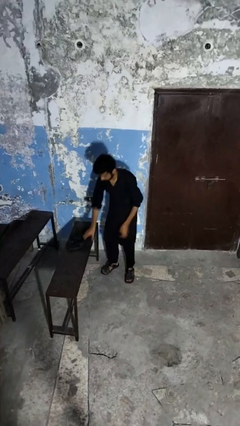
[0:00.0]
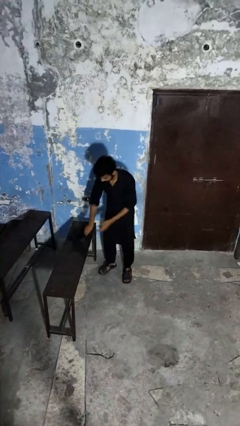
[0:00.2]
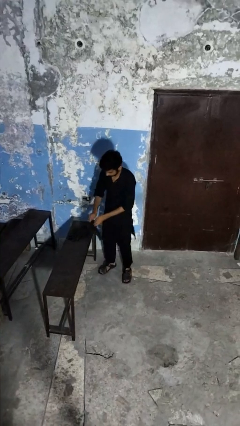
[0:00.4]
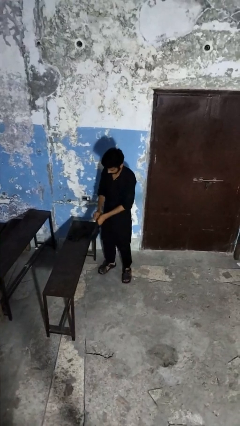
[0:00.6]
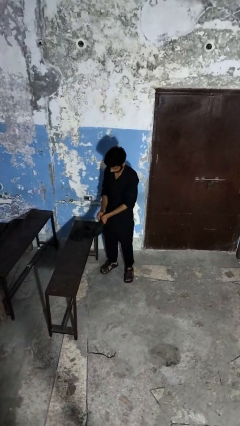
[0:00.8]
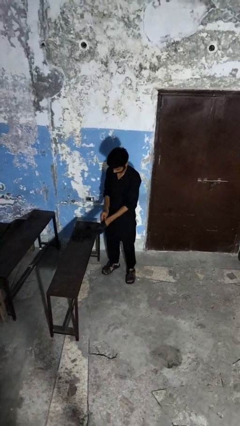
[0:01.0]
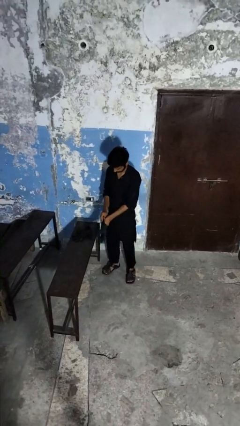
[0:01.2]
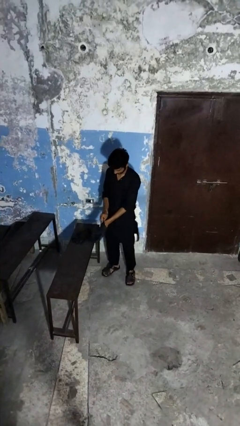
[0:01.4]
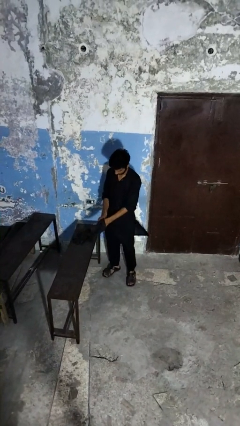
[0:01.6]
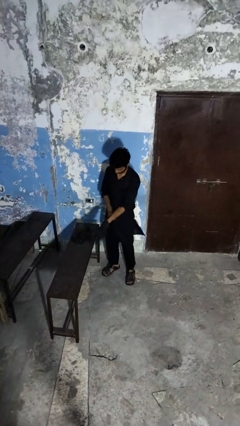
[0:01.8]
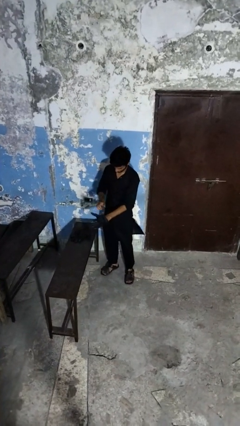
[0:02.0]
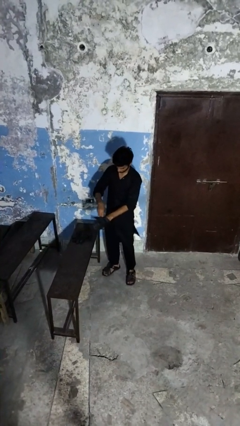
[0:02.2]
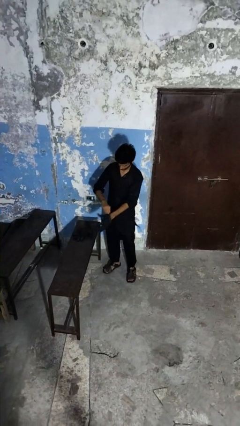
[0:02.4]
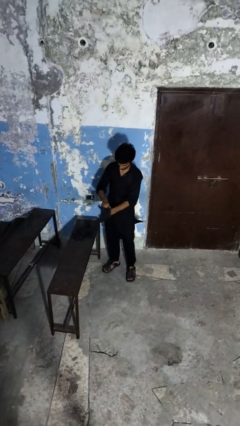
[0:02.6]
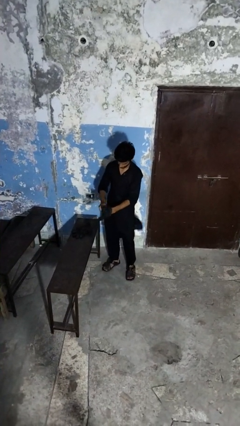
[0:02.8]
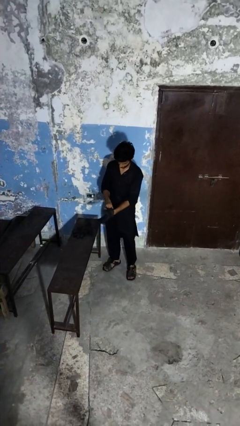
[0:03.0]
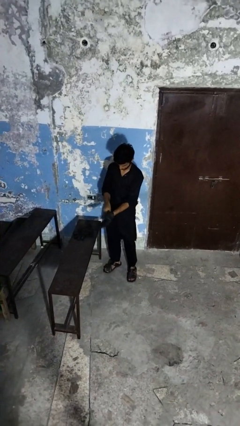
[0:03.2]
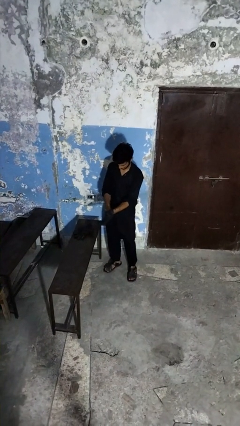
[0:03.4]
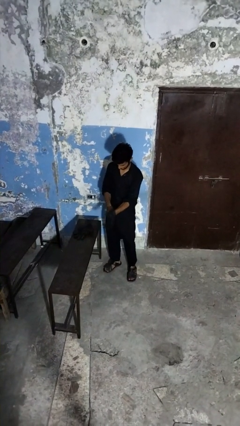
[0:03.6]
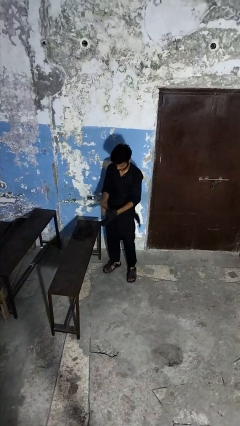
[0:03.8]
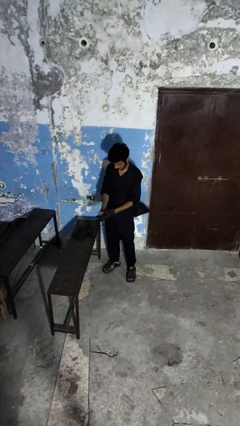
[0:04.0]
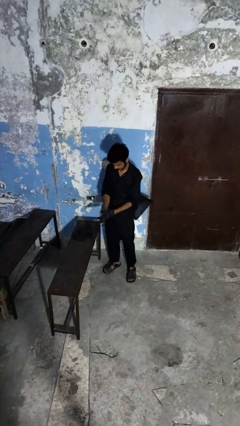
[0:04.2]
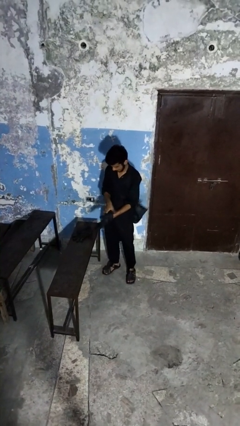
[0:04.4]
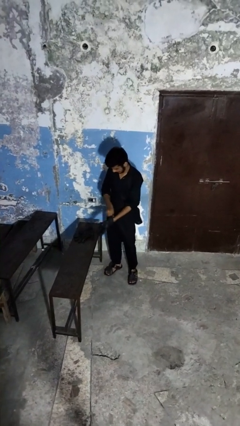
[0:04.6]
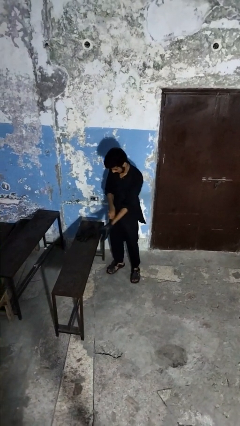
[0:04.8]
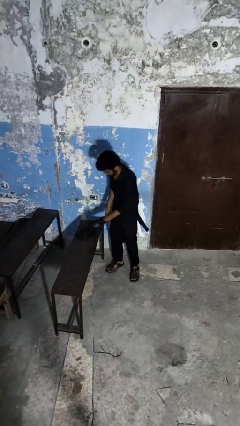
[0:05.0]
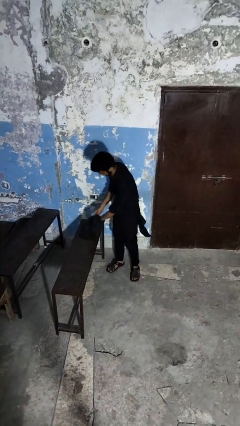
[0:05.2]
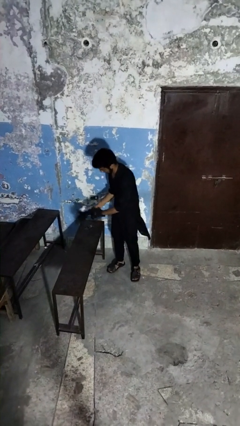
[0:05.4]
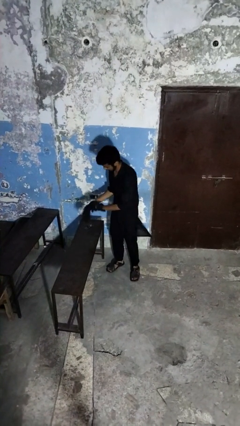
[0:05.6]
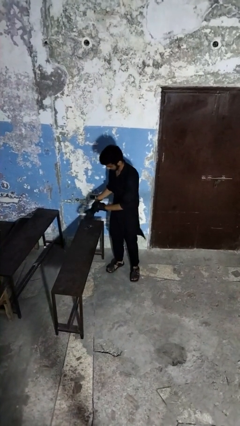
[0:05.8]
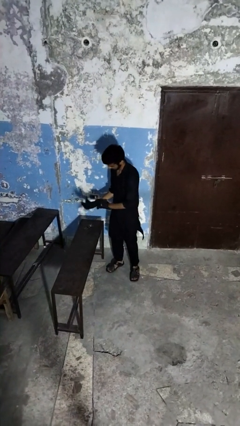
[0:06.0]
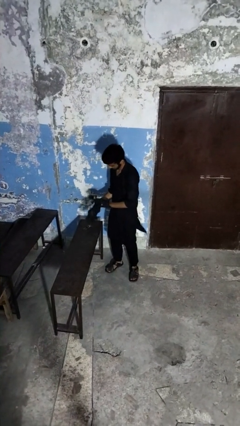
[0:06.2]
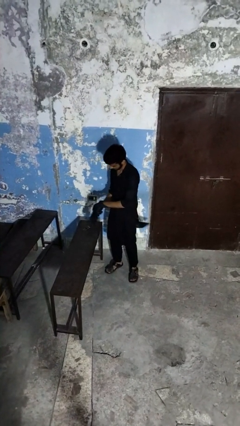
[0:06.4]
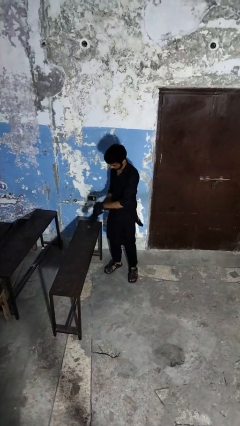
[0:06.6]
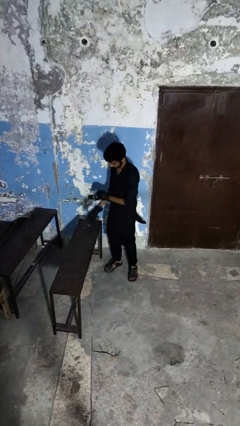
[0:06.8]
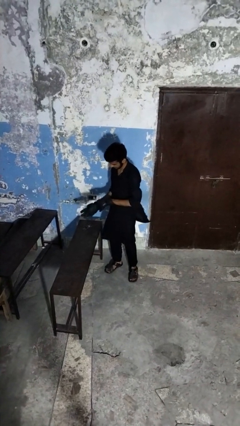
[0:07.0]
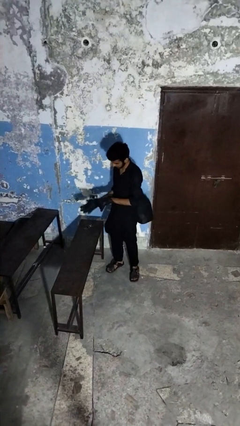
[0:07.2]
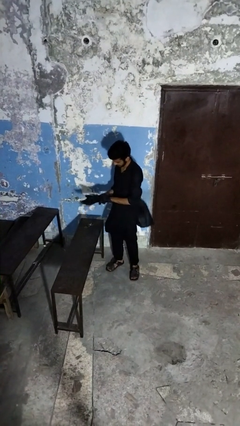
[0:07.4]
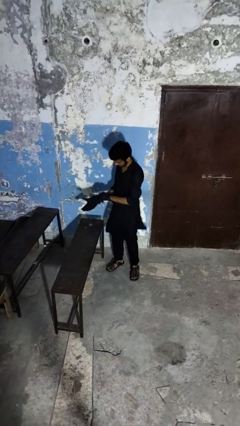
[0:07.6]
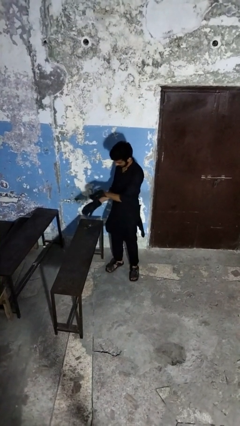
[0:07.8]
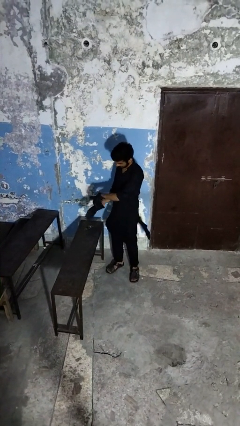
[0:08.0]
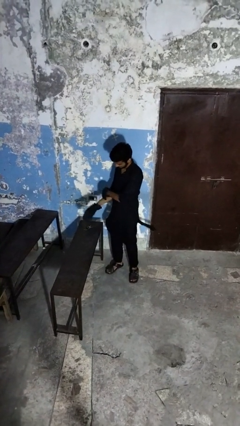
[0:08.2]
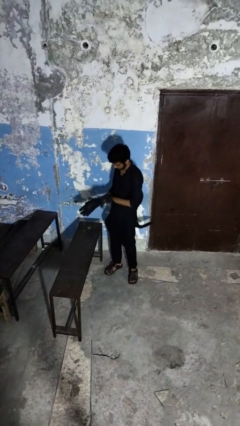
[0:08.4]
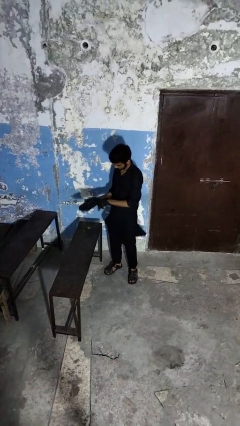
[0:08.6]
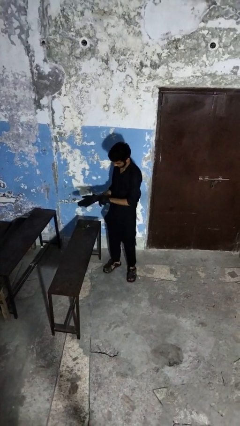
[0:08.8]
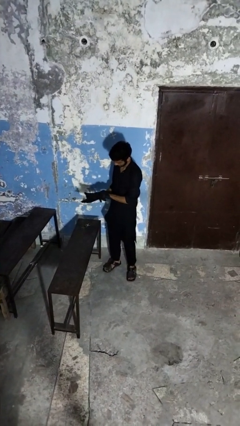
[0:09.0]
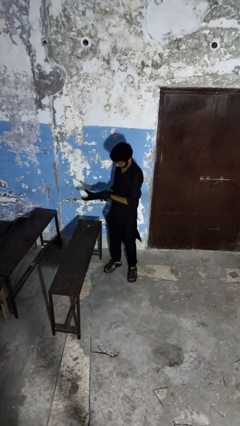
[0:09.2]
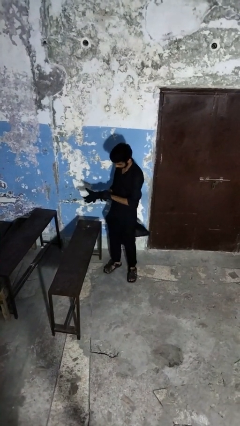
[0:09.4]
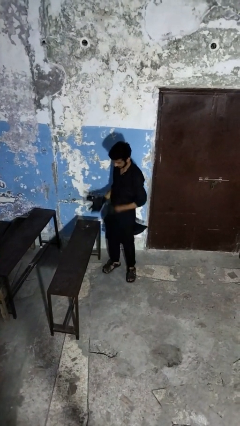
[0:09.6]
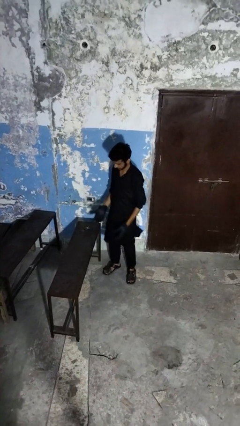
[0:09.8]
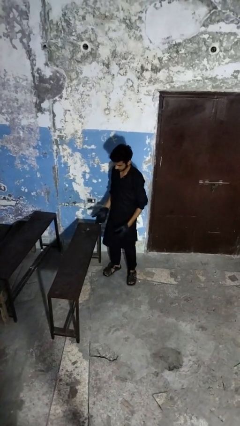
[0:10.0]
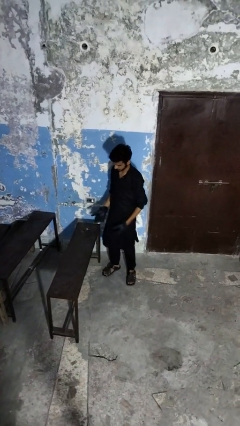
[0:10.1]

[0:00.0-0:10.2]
person puts on gloves

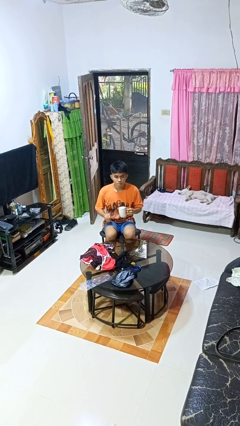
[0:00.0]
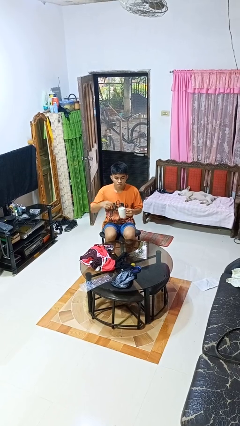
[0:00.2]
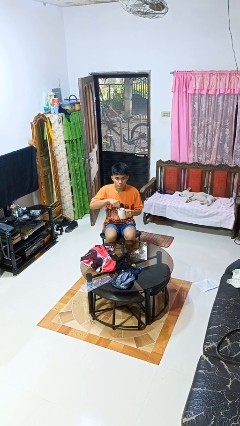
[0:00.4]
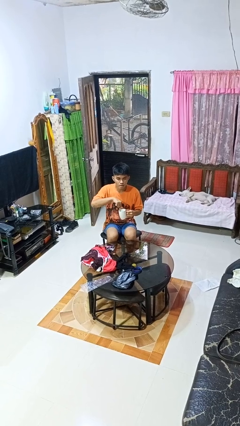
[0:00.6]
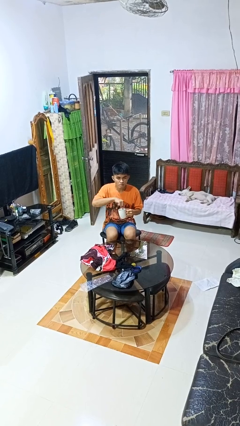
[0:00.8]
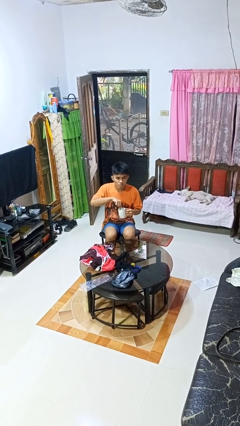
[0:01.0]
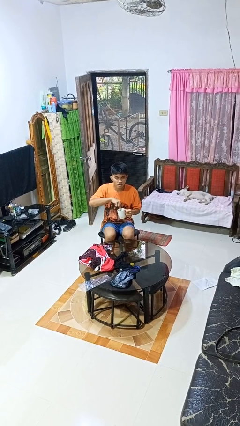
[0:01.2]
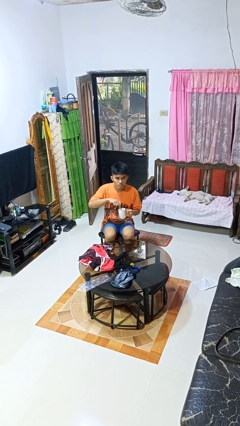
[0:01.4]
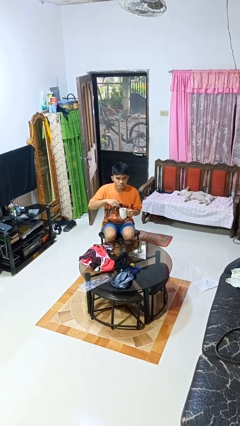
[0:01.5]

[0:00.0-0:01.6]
person stirs mug

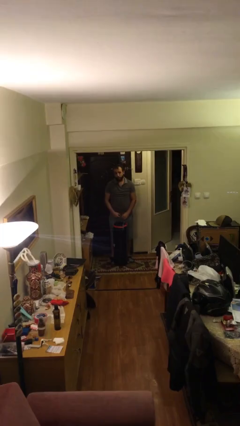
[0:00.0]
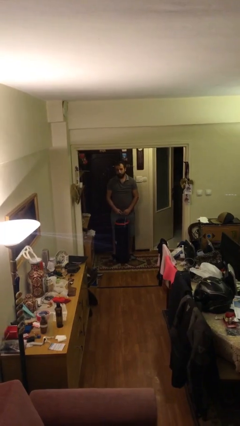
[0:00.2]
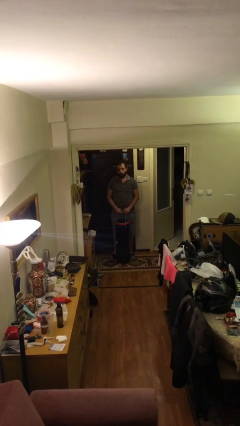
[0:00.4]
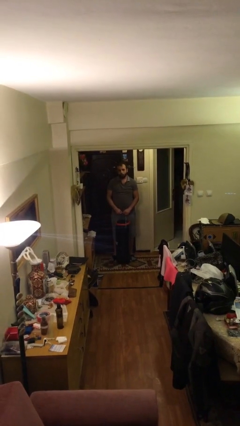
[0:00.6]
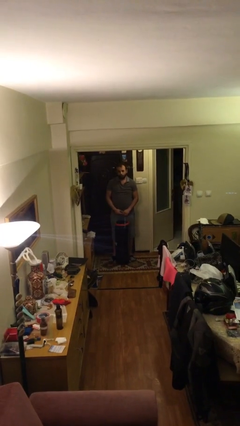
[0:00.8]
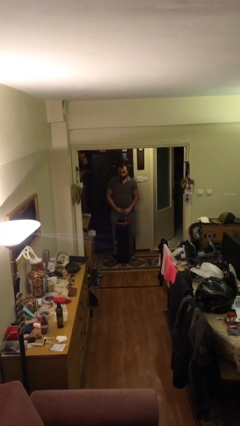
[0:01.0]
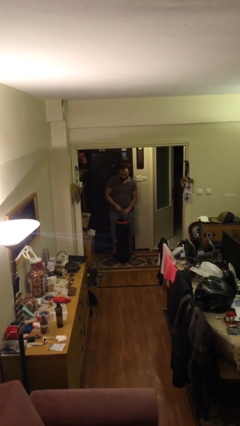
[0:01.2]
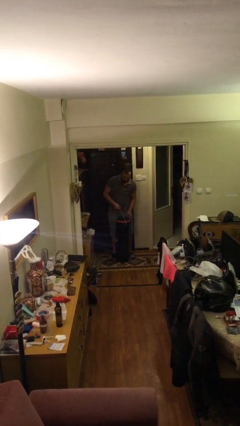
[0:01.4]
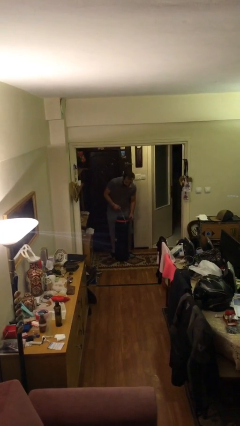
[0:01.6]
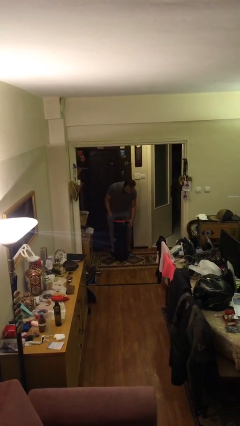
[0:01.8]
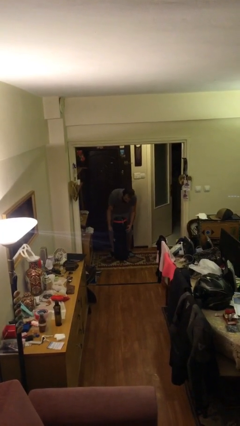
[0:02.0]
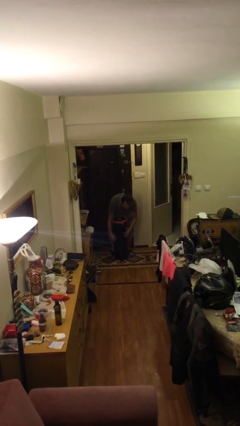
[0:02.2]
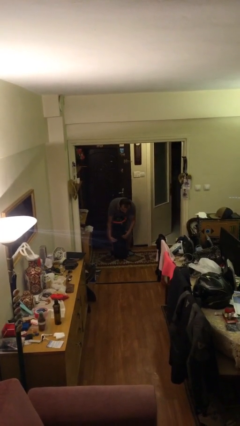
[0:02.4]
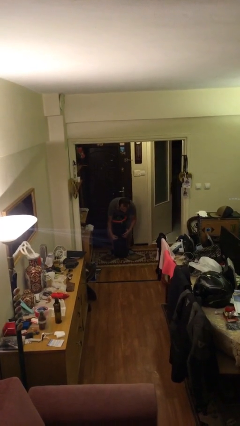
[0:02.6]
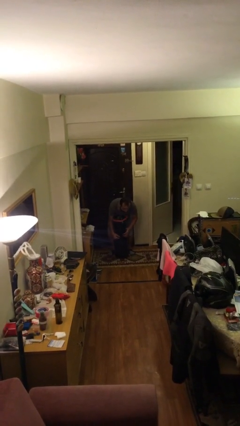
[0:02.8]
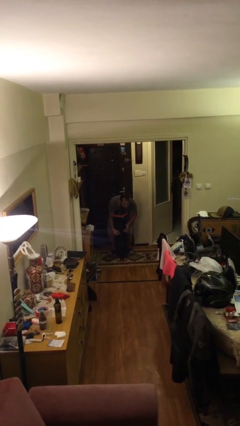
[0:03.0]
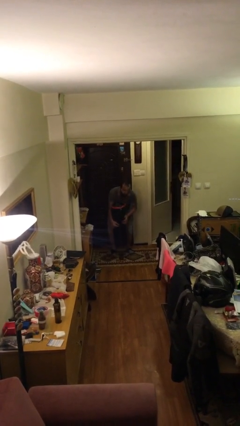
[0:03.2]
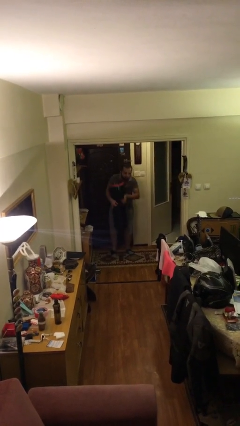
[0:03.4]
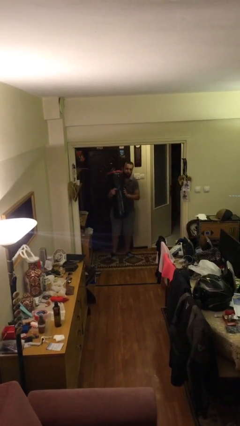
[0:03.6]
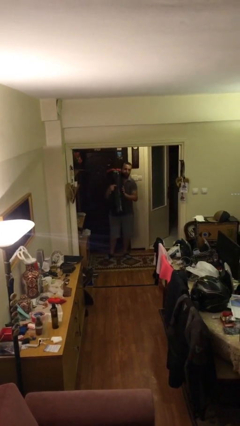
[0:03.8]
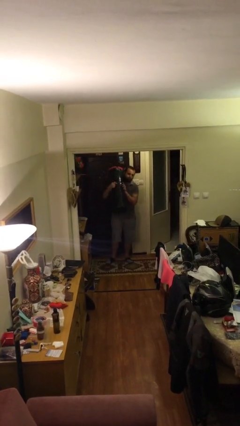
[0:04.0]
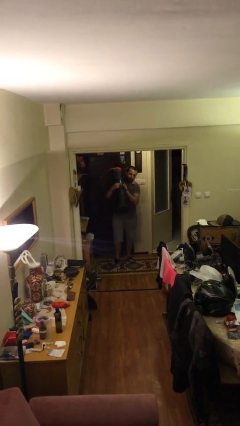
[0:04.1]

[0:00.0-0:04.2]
person picks up object from floor

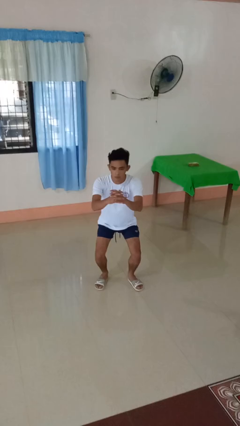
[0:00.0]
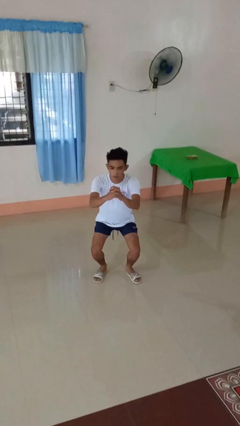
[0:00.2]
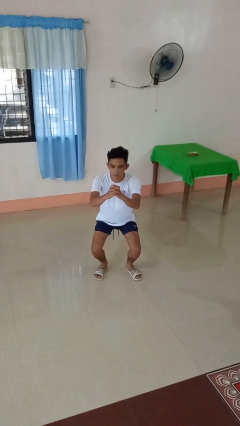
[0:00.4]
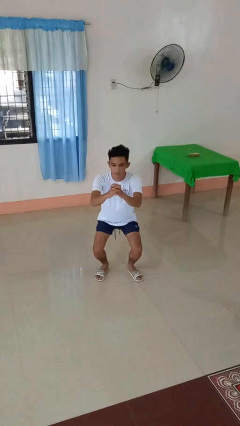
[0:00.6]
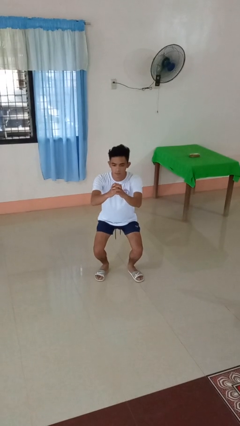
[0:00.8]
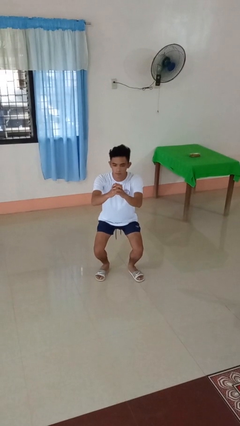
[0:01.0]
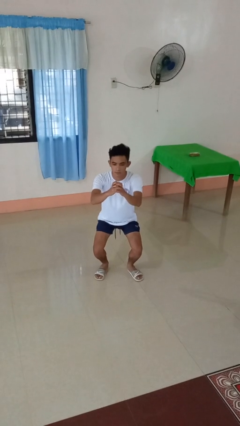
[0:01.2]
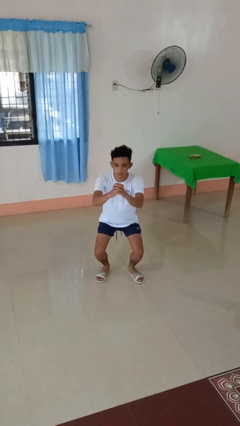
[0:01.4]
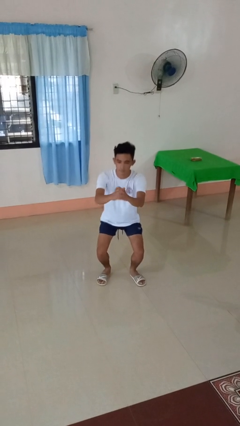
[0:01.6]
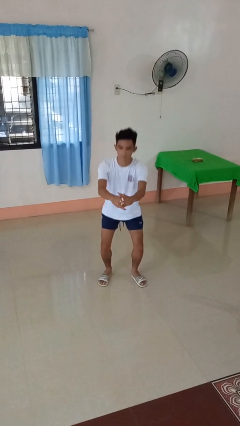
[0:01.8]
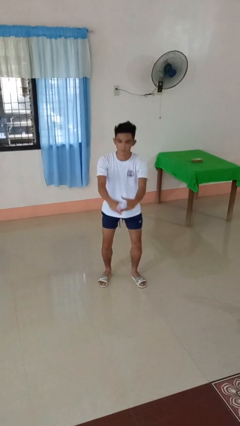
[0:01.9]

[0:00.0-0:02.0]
person squats
